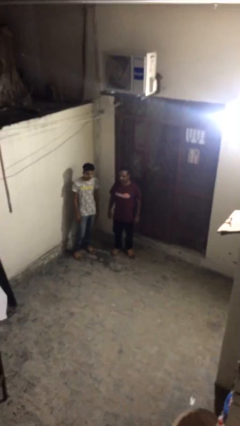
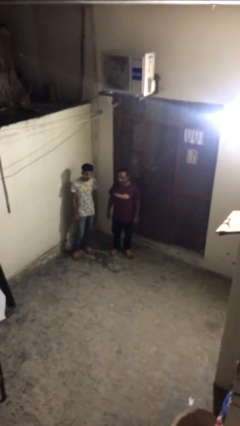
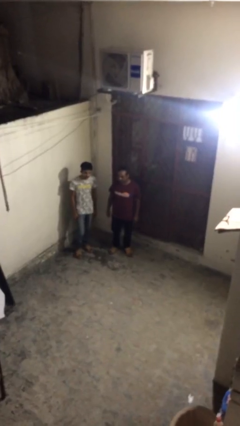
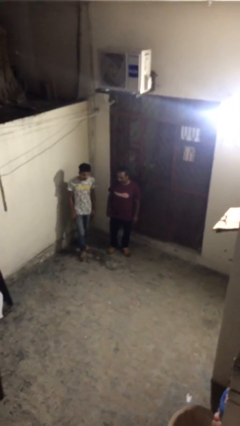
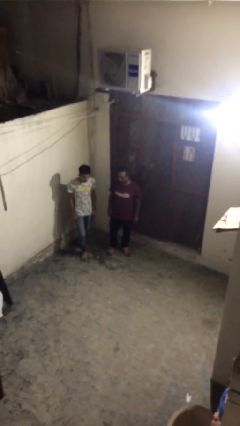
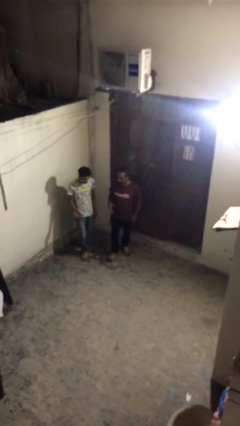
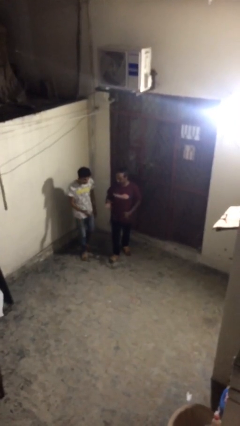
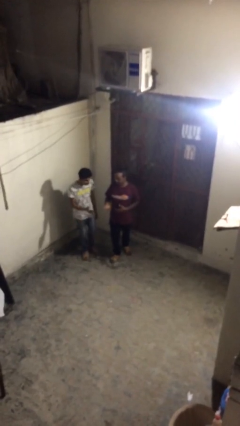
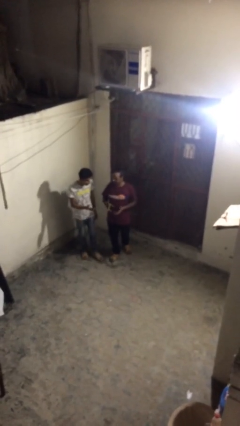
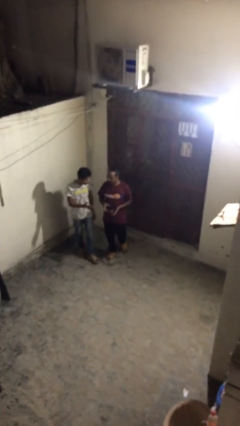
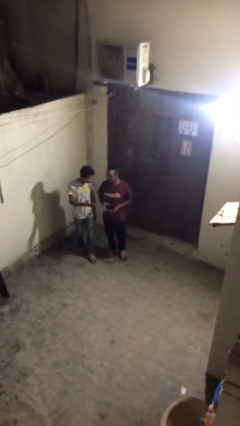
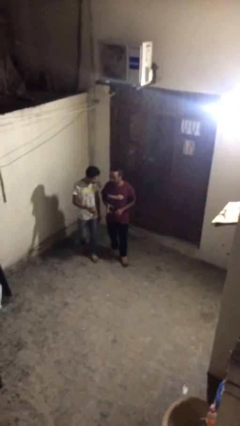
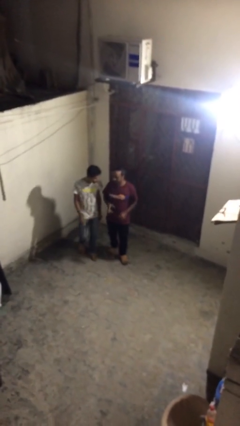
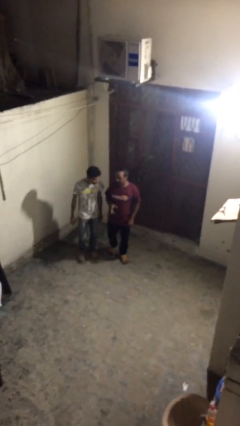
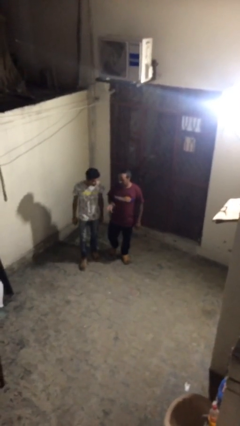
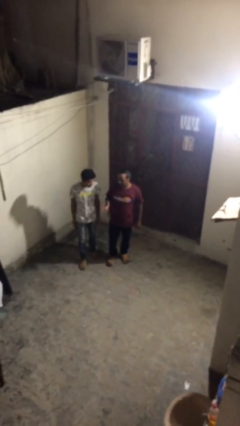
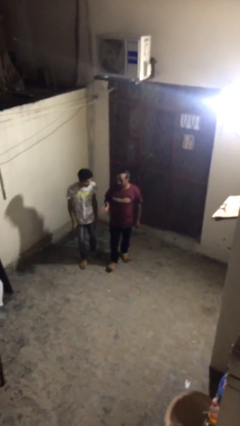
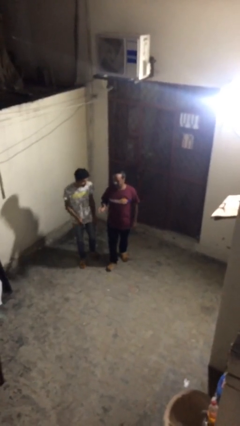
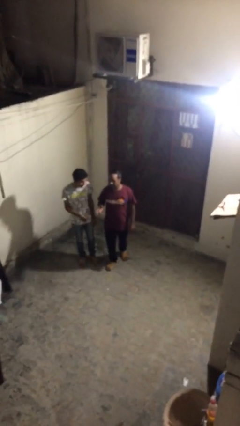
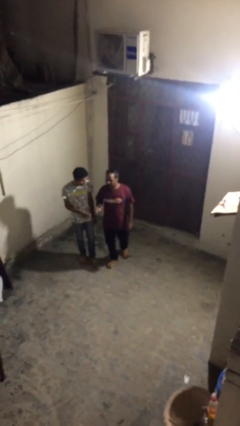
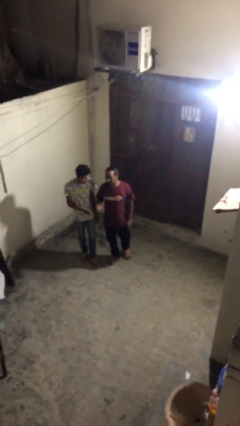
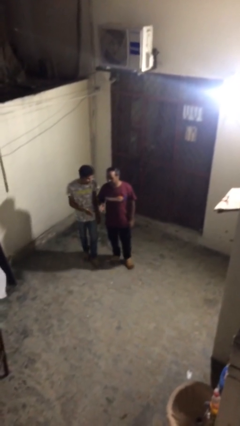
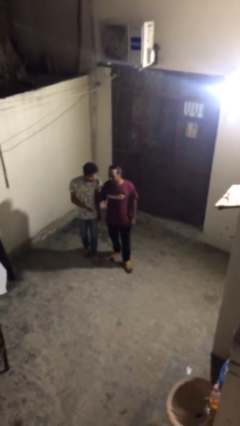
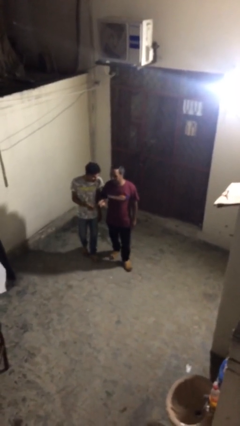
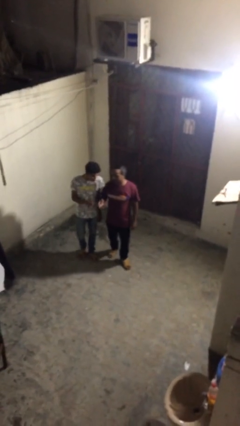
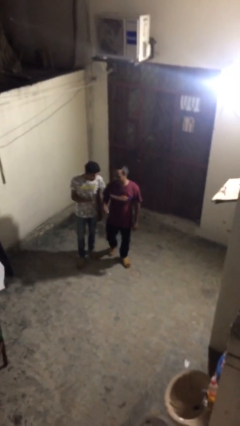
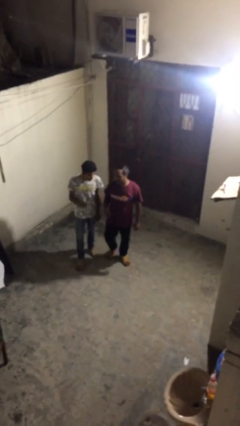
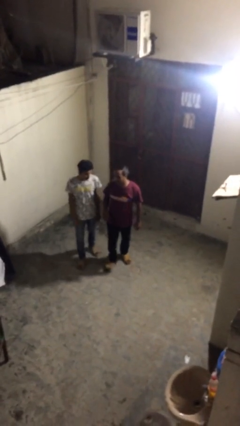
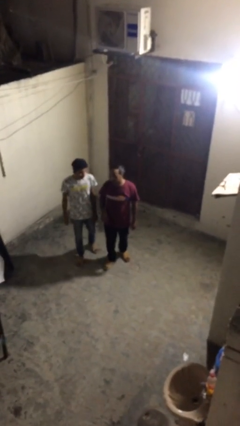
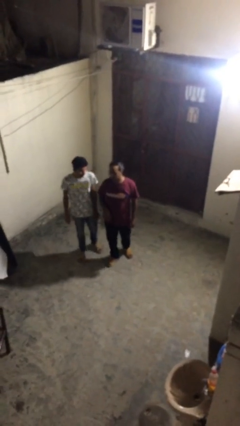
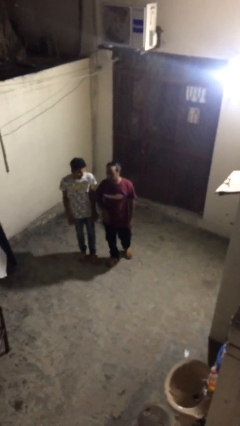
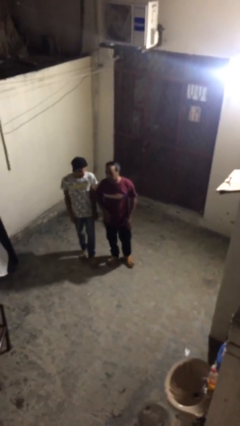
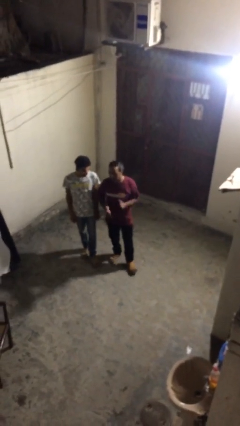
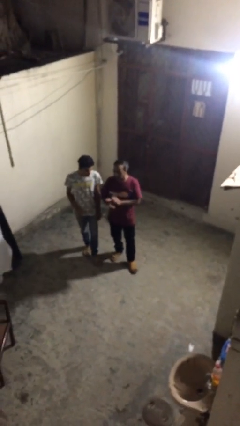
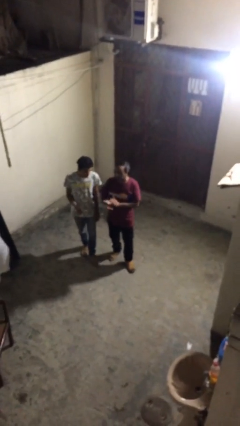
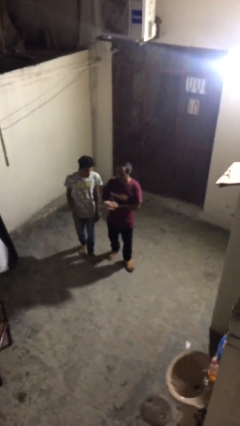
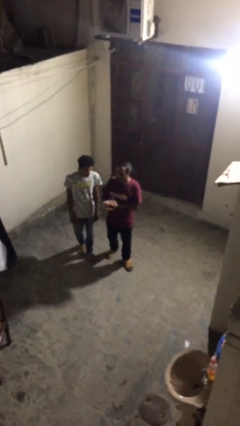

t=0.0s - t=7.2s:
person talks to person

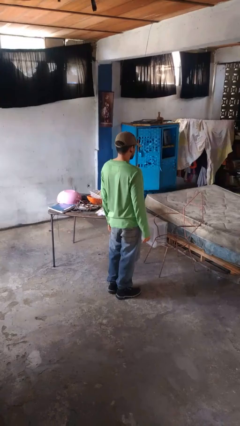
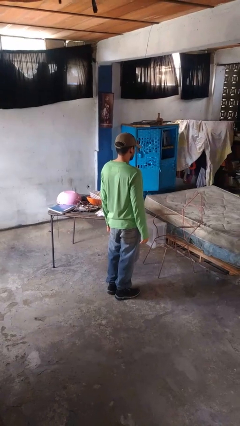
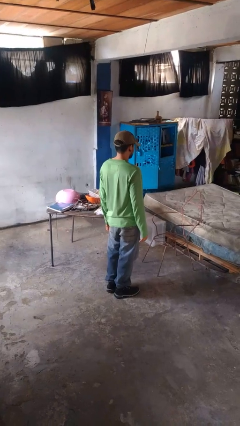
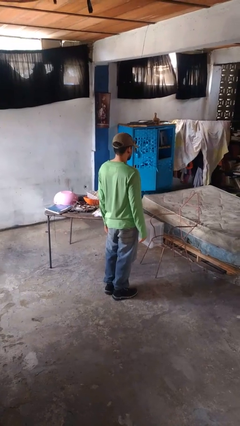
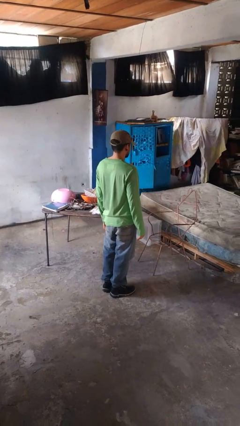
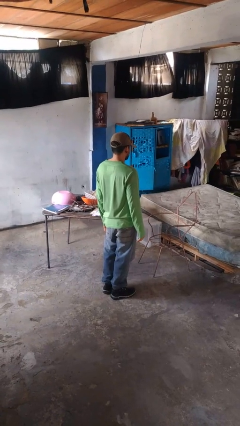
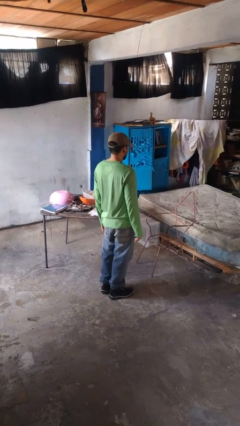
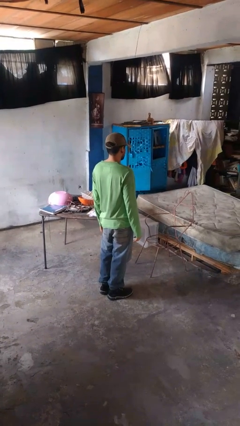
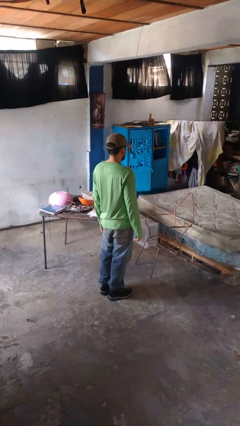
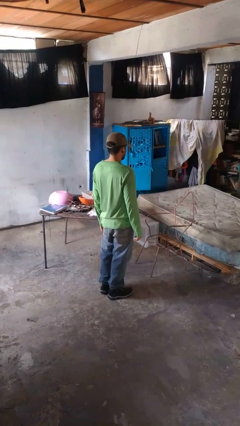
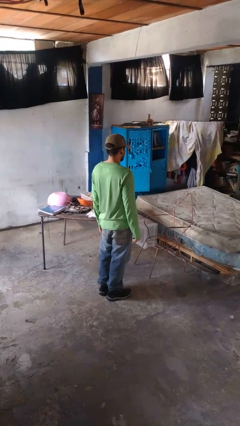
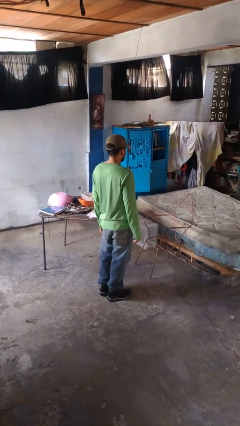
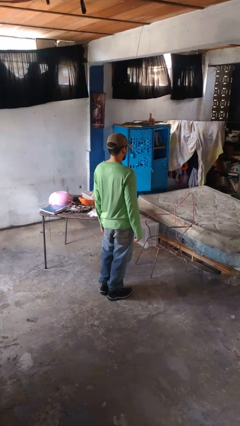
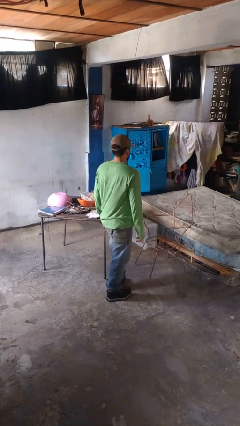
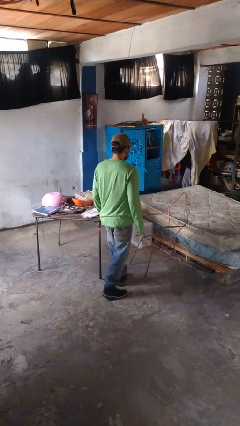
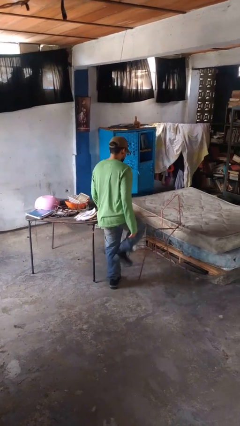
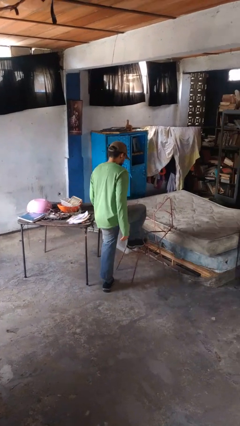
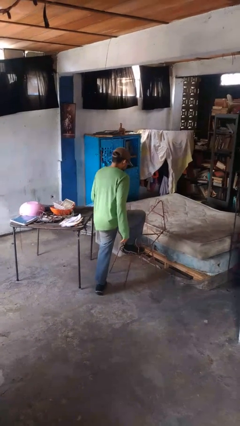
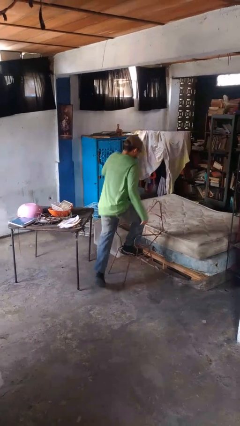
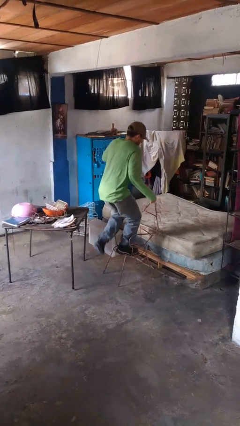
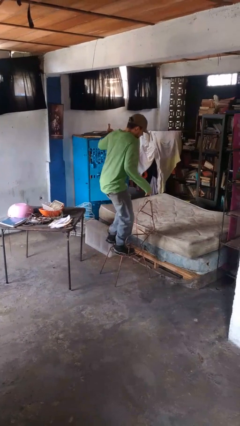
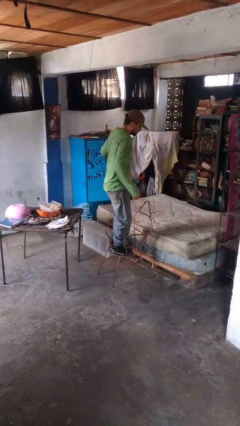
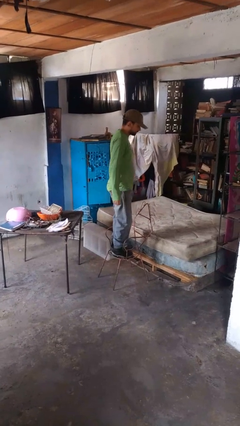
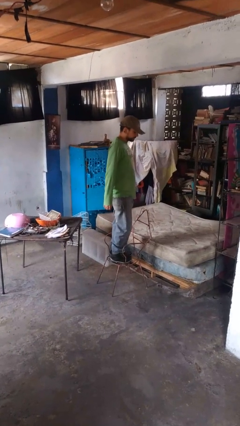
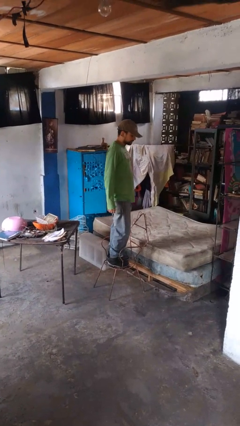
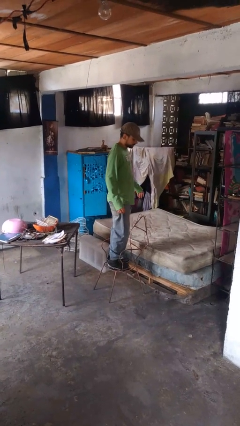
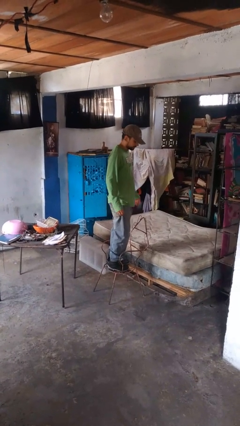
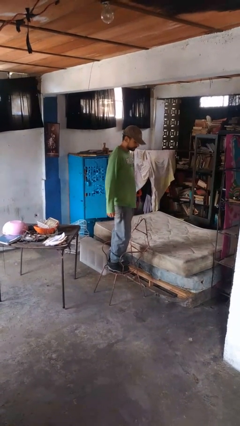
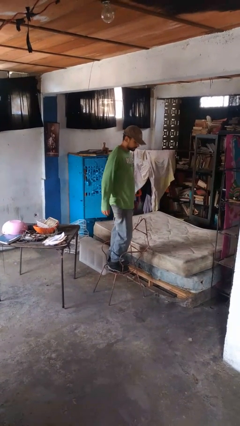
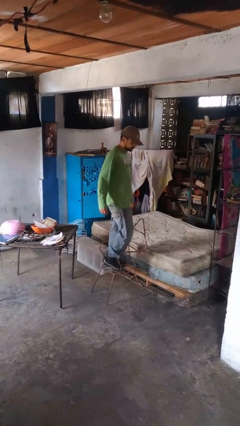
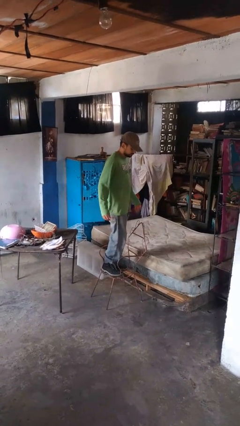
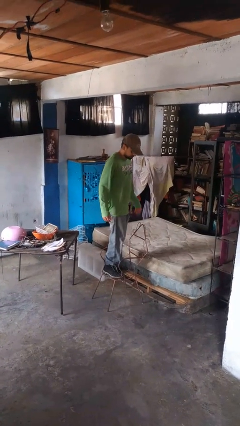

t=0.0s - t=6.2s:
person climbs on chair

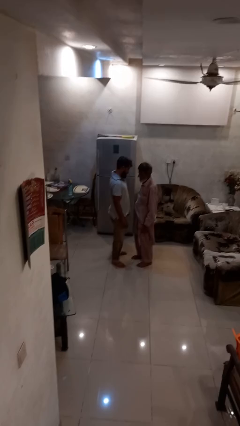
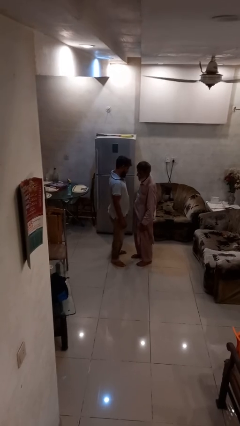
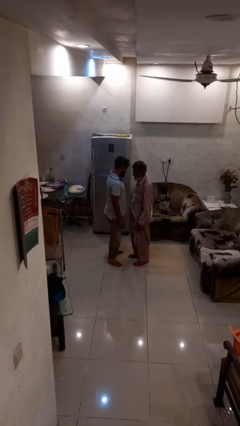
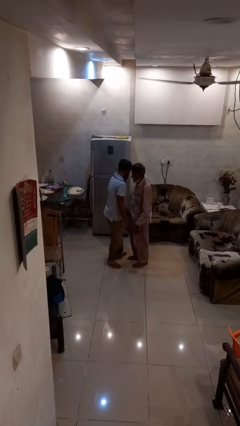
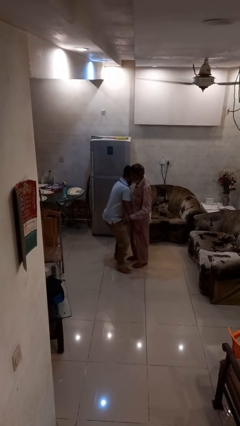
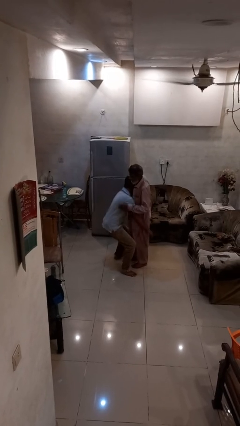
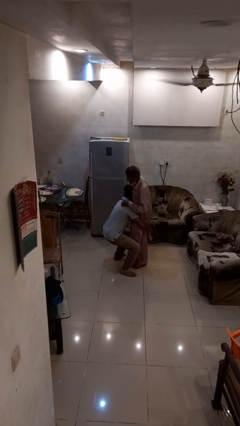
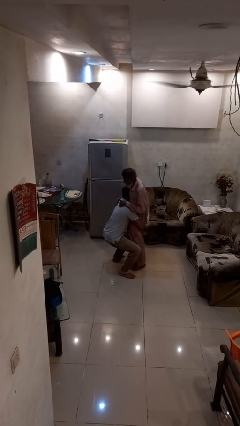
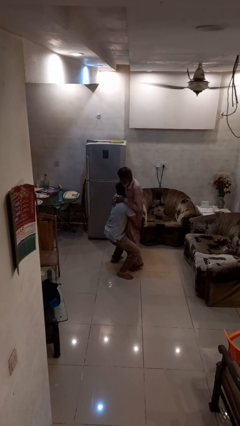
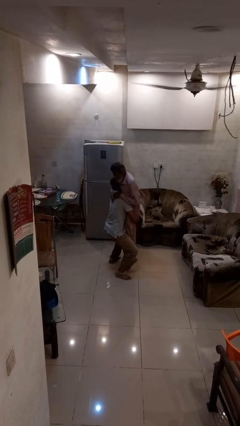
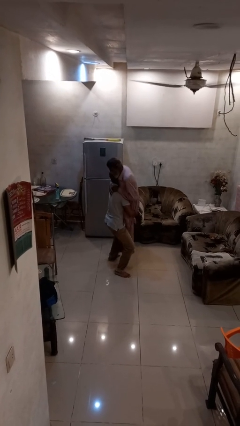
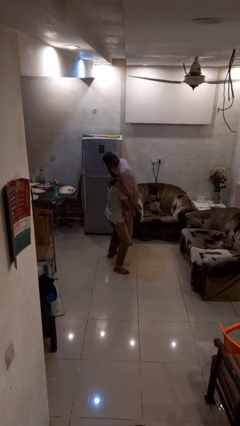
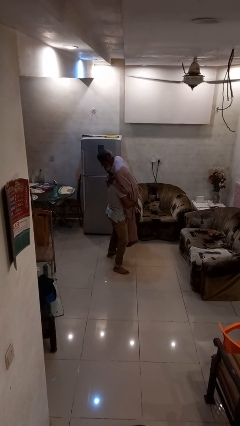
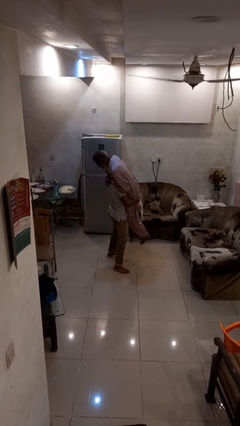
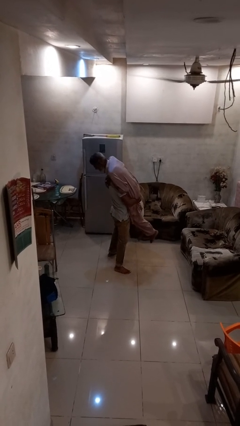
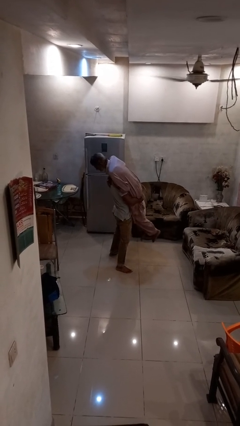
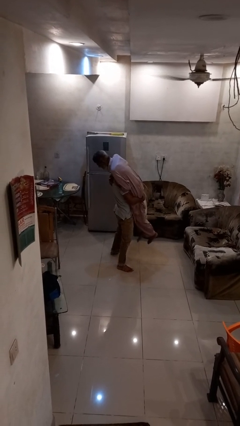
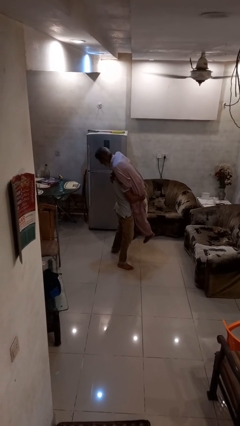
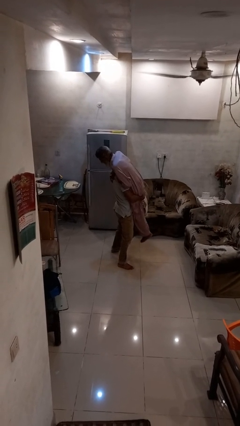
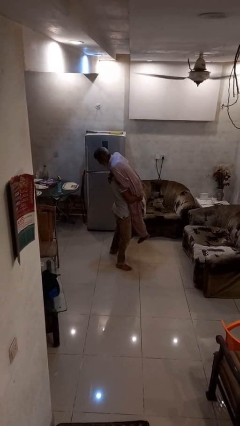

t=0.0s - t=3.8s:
person picks up person

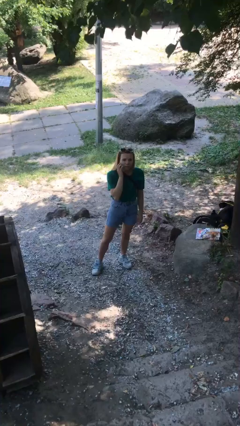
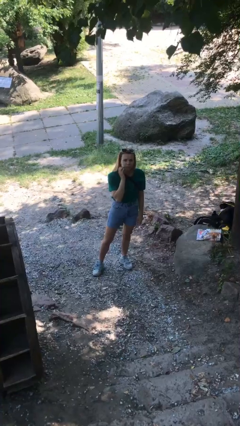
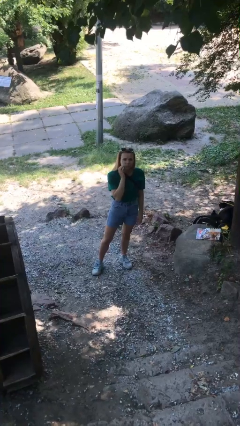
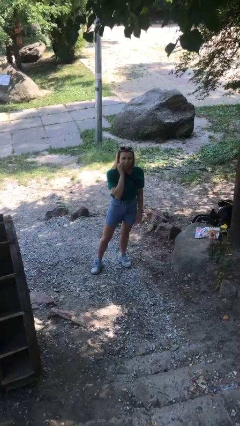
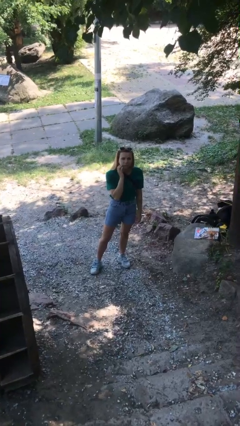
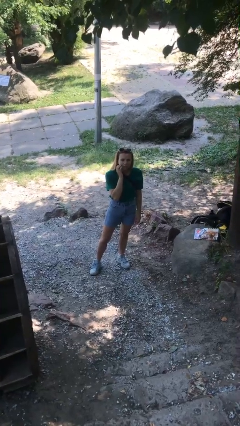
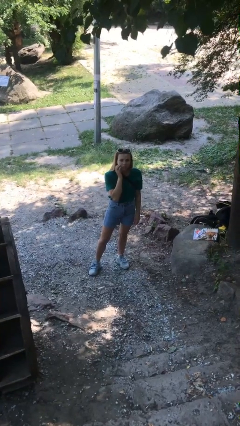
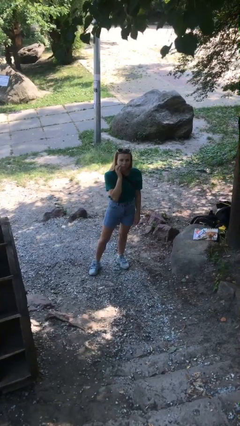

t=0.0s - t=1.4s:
person scratches face
